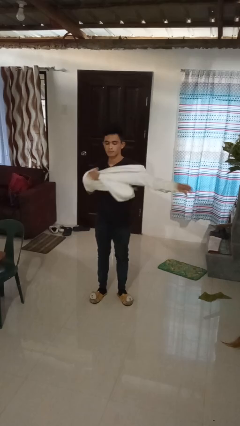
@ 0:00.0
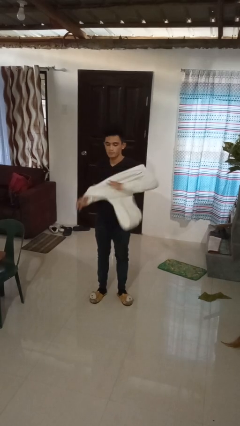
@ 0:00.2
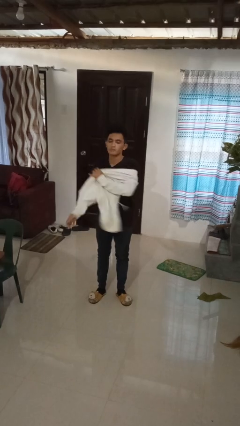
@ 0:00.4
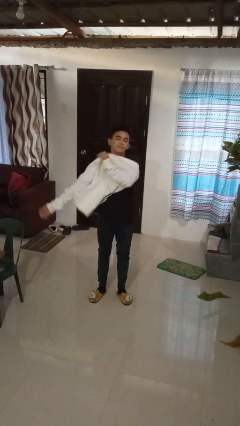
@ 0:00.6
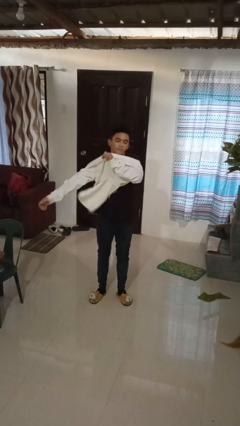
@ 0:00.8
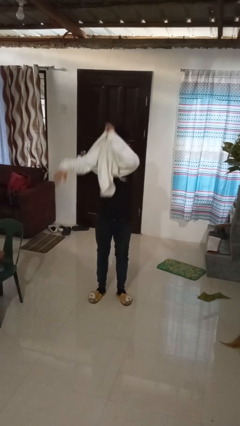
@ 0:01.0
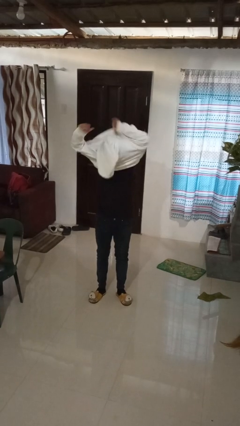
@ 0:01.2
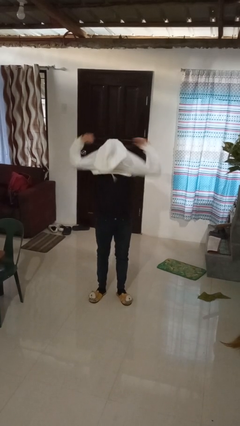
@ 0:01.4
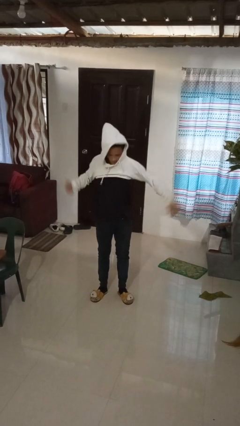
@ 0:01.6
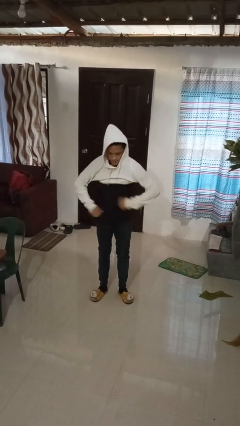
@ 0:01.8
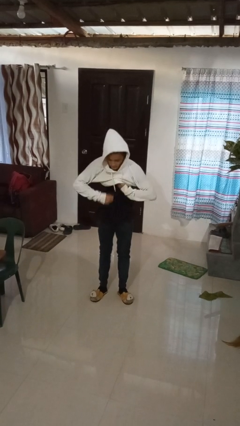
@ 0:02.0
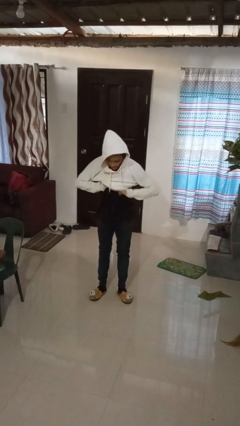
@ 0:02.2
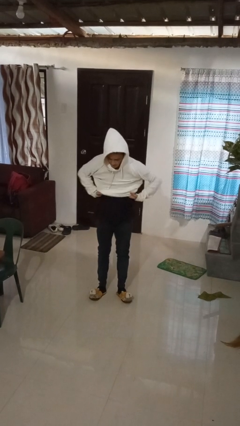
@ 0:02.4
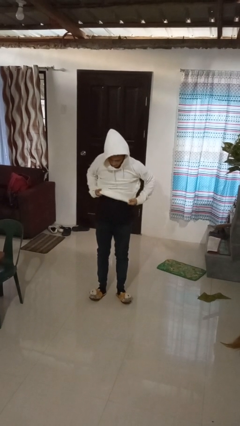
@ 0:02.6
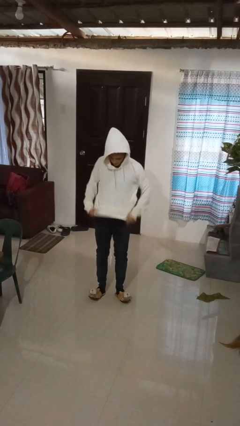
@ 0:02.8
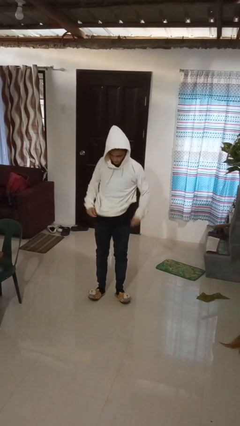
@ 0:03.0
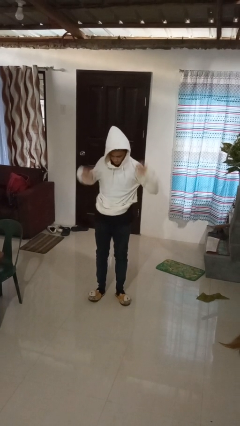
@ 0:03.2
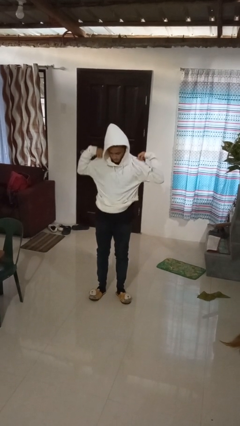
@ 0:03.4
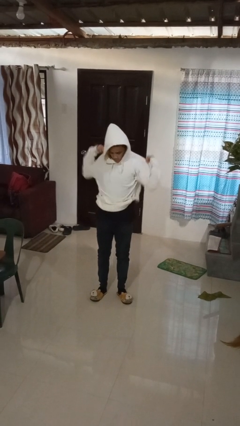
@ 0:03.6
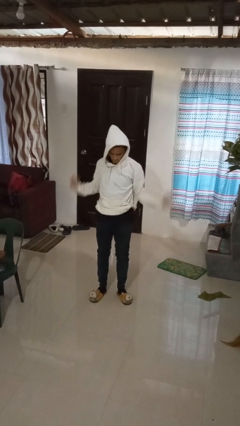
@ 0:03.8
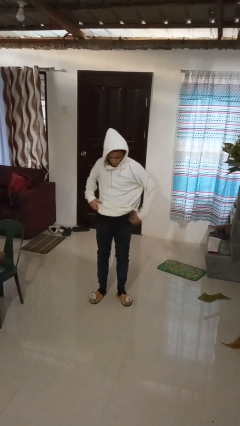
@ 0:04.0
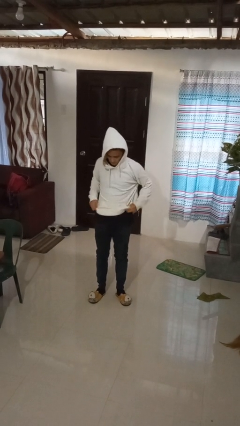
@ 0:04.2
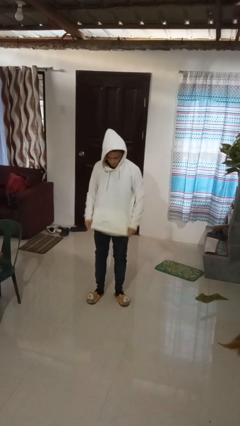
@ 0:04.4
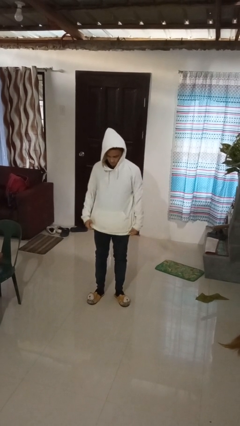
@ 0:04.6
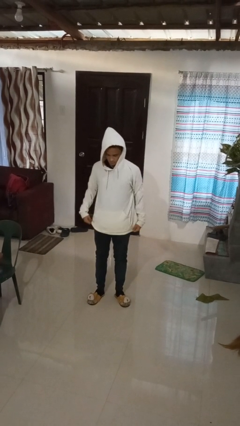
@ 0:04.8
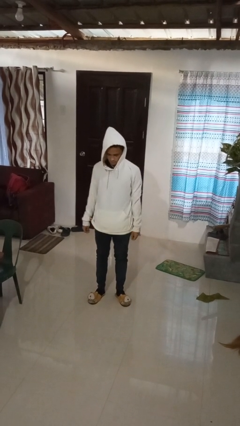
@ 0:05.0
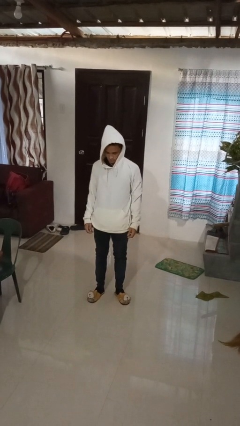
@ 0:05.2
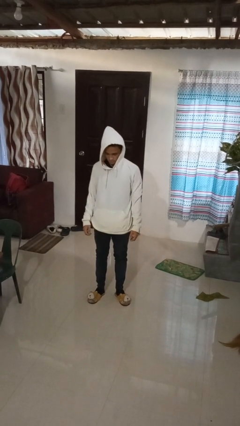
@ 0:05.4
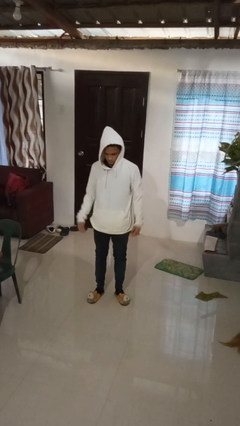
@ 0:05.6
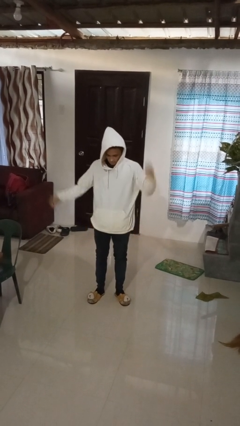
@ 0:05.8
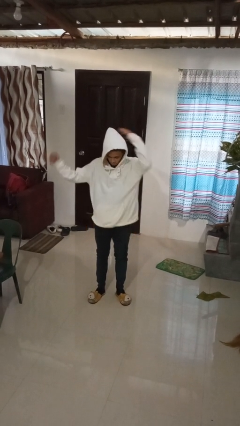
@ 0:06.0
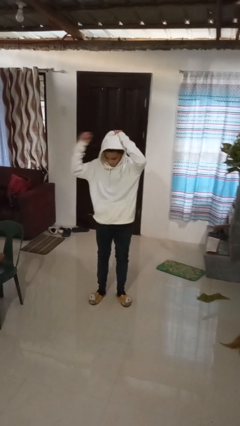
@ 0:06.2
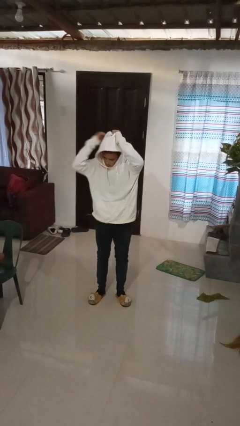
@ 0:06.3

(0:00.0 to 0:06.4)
person puts on hoodie

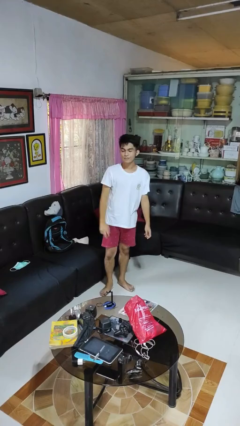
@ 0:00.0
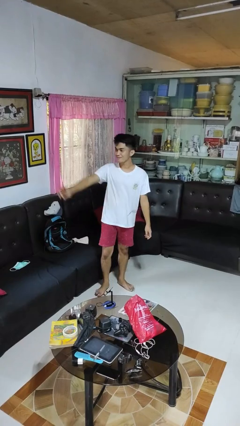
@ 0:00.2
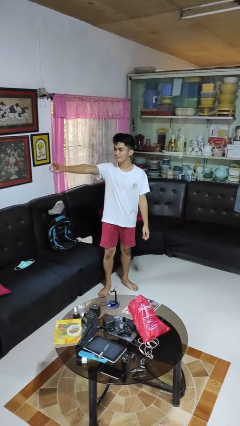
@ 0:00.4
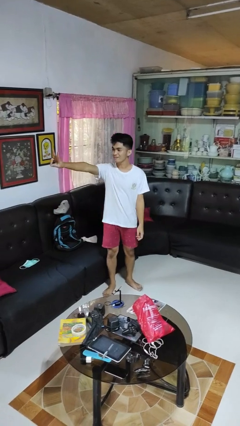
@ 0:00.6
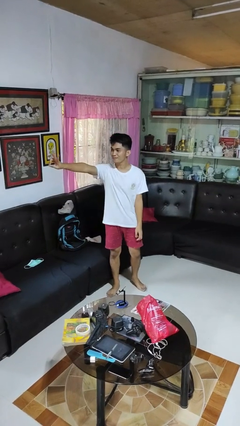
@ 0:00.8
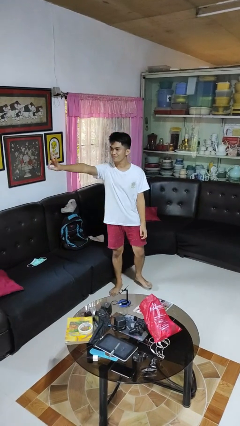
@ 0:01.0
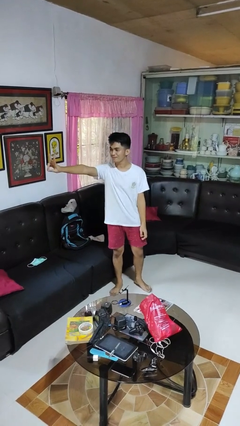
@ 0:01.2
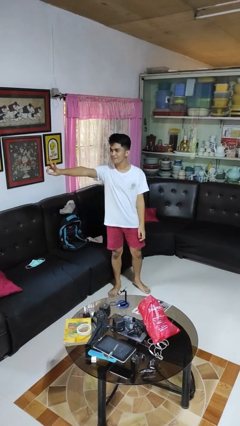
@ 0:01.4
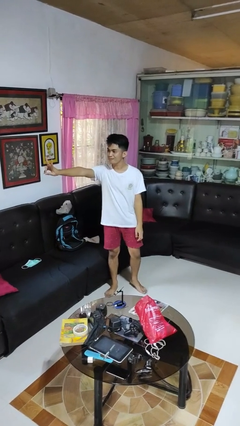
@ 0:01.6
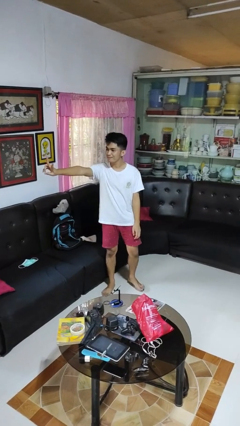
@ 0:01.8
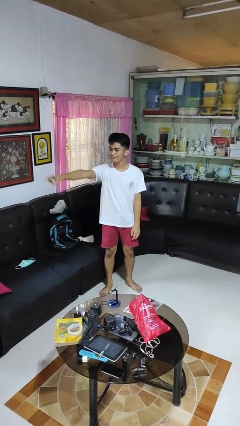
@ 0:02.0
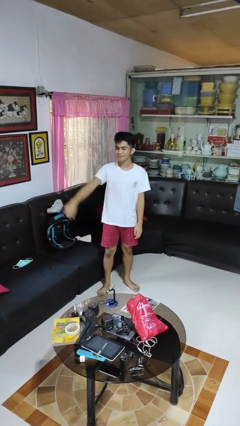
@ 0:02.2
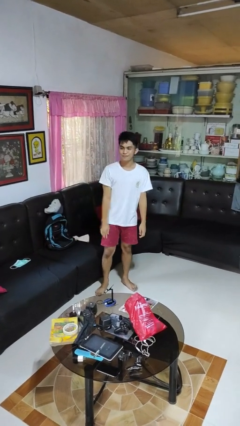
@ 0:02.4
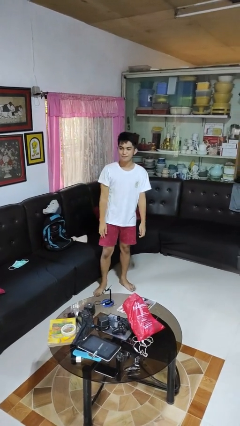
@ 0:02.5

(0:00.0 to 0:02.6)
person gestures peace

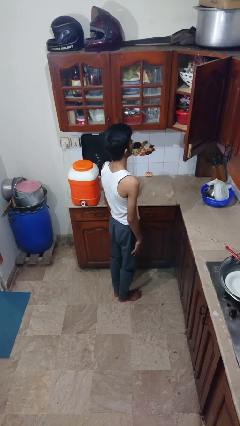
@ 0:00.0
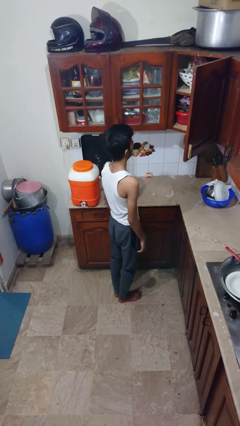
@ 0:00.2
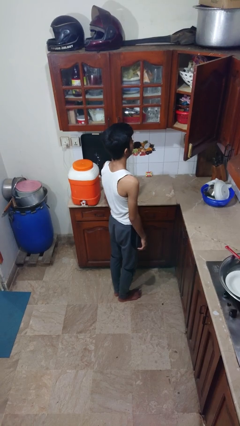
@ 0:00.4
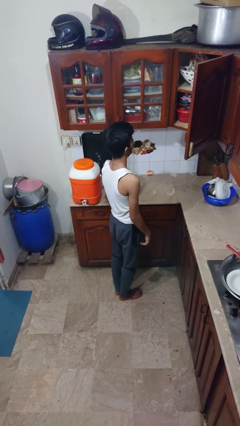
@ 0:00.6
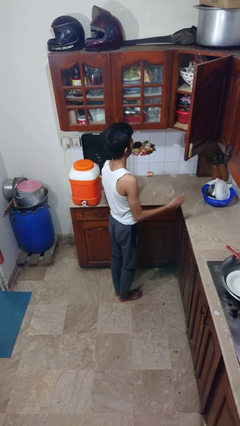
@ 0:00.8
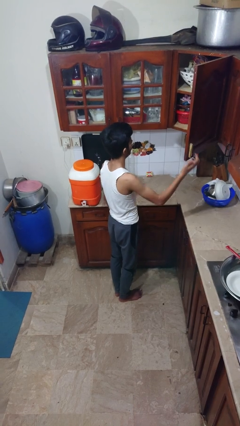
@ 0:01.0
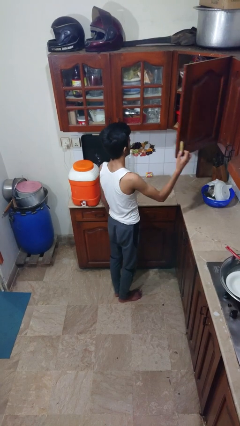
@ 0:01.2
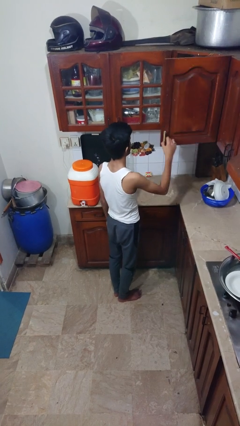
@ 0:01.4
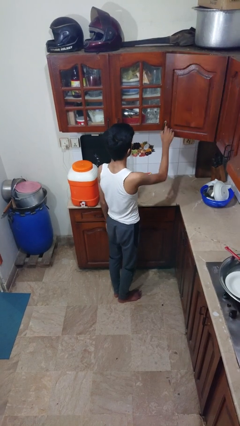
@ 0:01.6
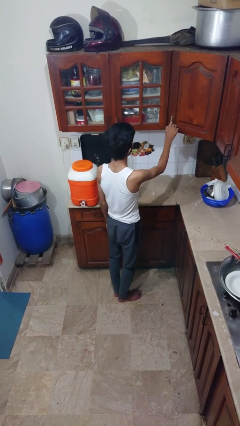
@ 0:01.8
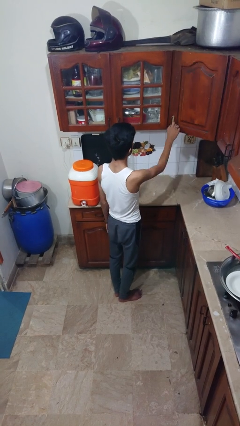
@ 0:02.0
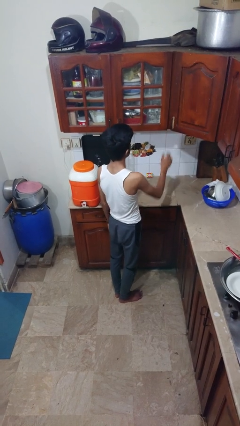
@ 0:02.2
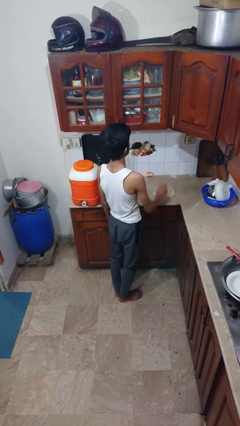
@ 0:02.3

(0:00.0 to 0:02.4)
person closes cabinet

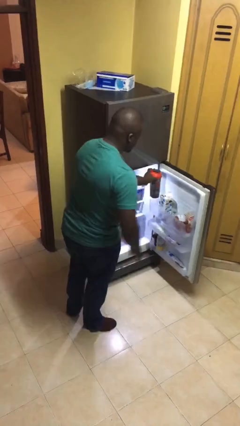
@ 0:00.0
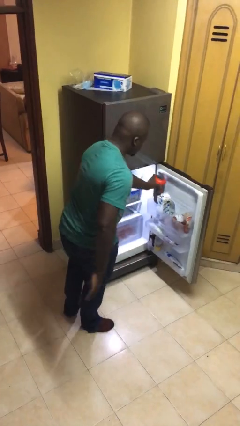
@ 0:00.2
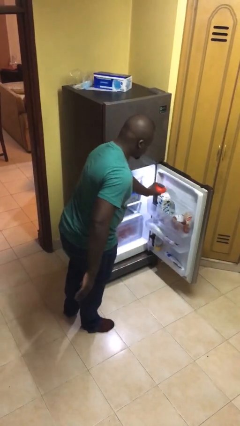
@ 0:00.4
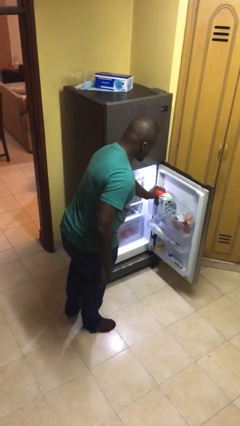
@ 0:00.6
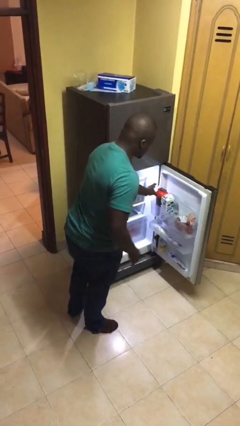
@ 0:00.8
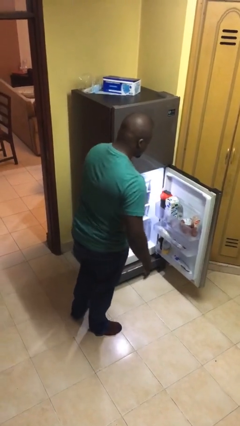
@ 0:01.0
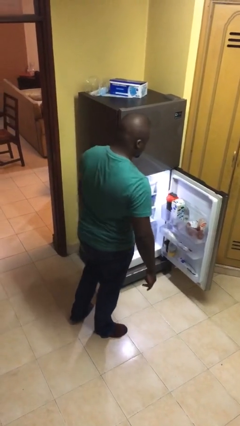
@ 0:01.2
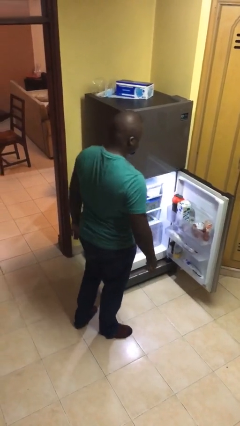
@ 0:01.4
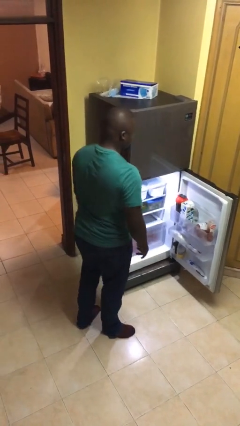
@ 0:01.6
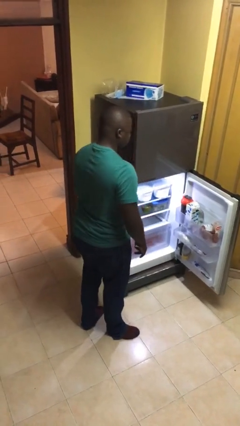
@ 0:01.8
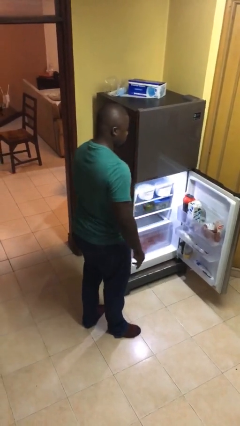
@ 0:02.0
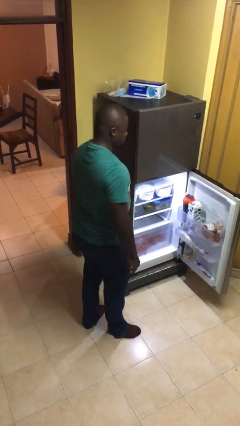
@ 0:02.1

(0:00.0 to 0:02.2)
person puts object into refrigerator

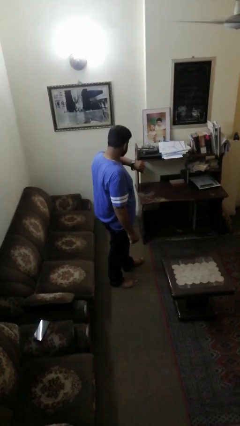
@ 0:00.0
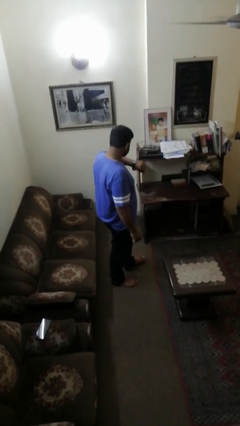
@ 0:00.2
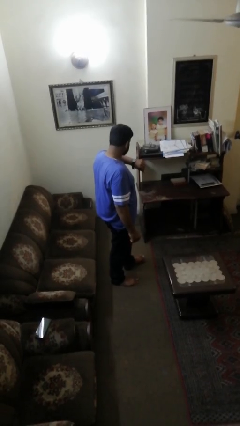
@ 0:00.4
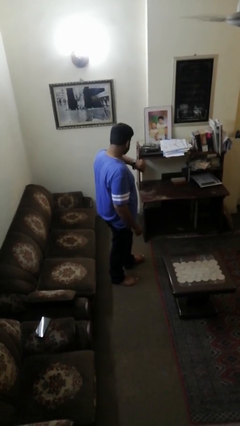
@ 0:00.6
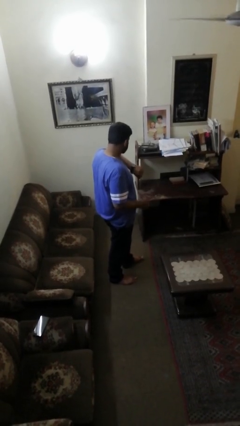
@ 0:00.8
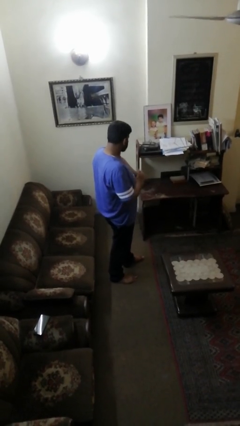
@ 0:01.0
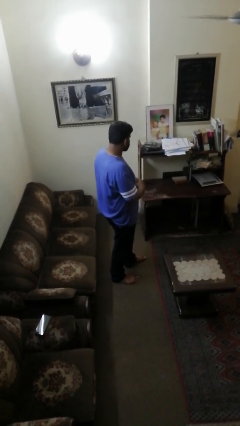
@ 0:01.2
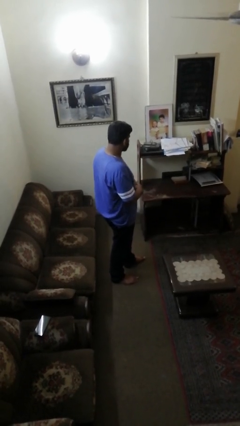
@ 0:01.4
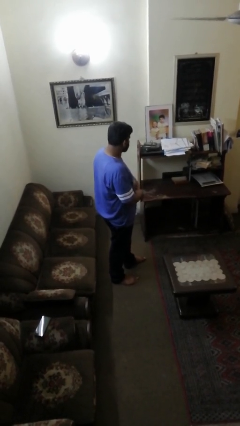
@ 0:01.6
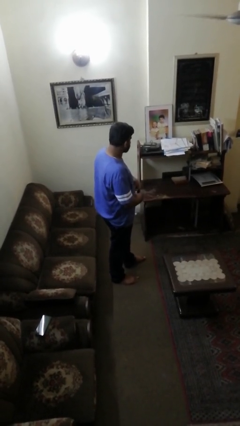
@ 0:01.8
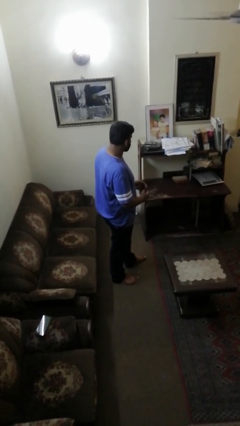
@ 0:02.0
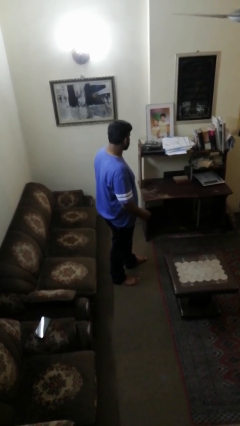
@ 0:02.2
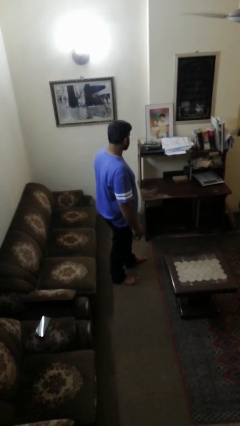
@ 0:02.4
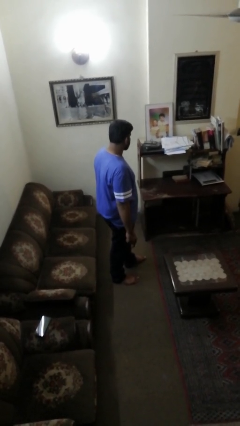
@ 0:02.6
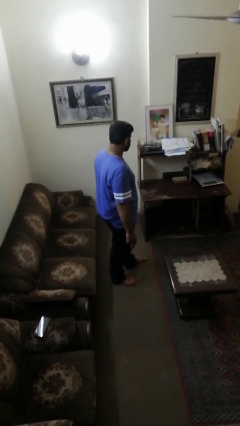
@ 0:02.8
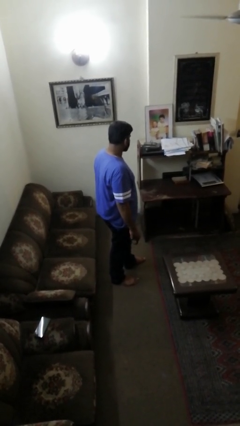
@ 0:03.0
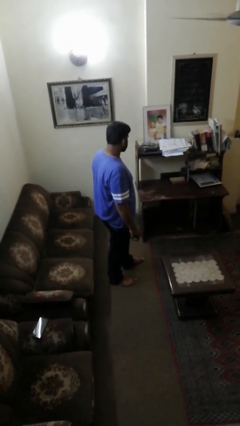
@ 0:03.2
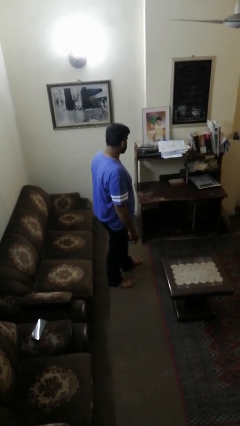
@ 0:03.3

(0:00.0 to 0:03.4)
person takes off wristwatch

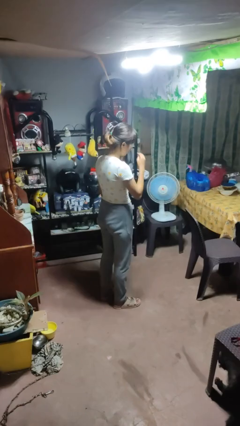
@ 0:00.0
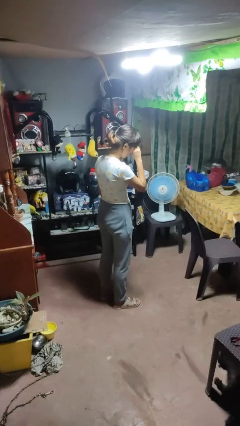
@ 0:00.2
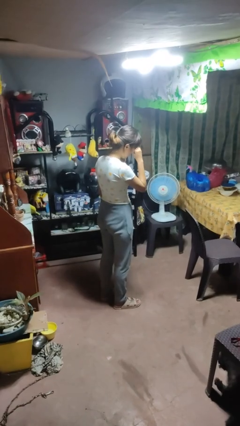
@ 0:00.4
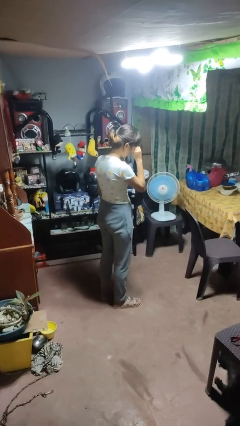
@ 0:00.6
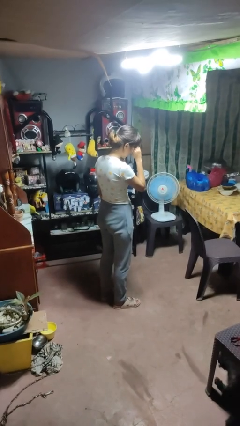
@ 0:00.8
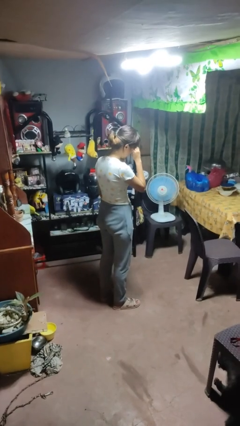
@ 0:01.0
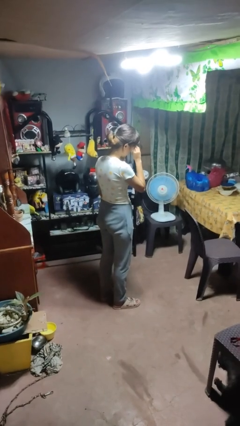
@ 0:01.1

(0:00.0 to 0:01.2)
person rubs eyes
